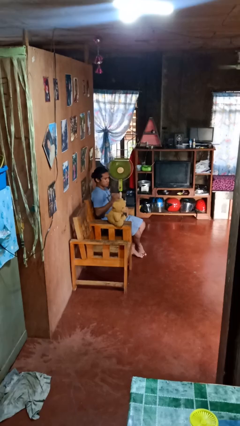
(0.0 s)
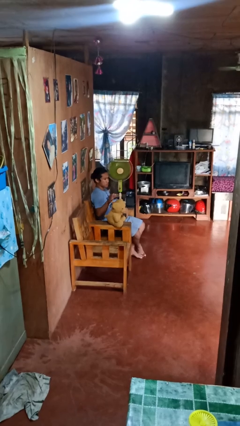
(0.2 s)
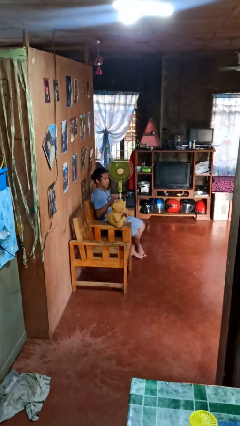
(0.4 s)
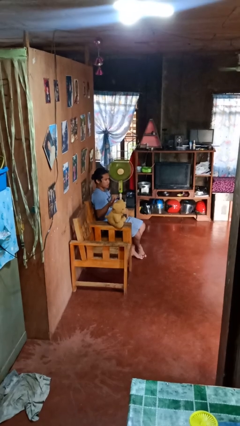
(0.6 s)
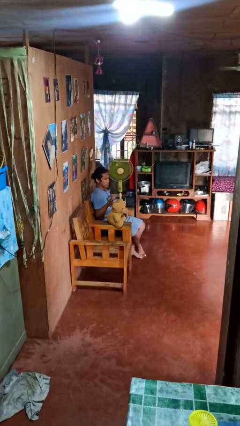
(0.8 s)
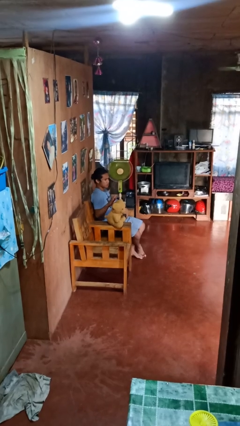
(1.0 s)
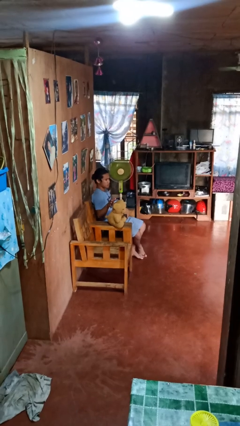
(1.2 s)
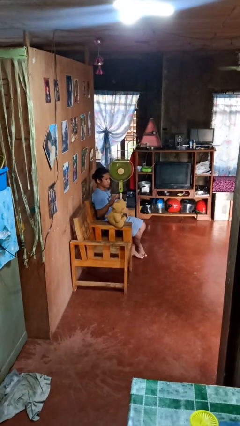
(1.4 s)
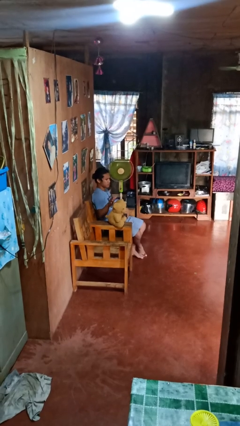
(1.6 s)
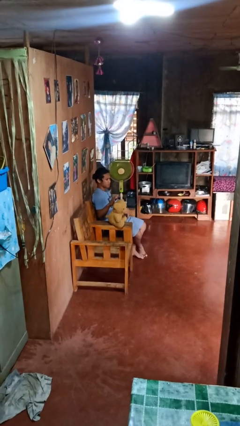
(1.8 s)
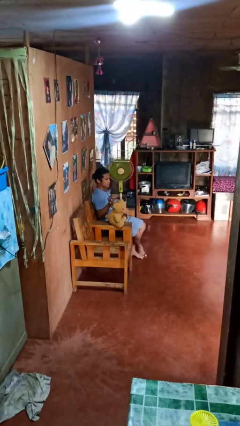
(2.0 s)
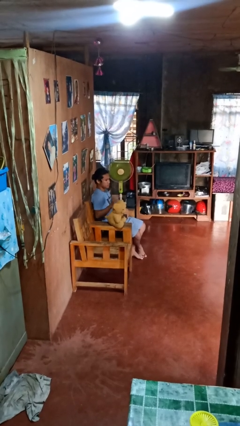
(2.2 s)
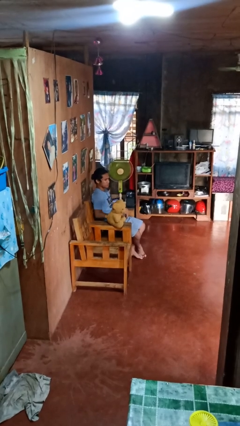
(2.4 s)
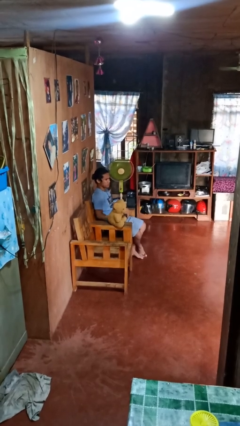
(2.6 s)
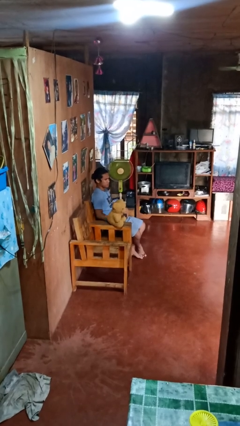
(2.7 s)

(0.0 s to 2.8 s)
person waves hand over object

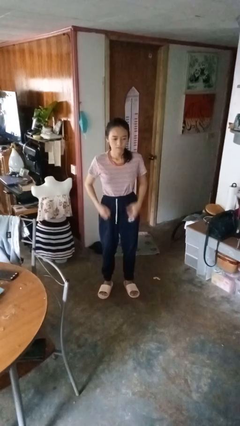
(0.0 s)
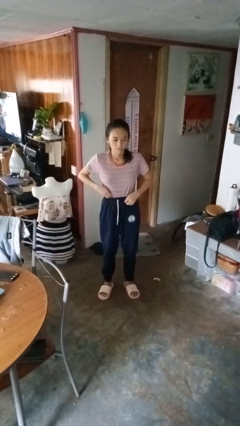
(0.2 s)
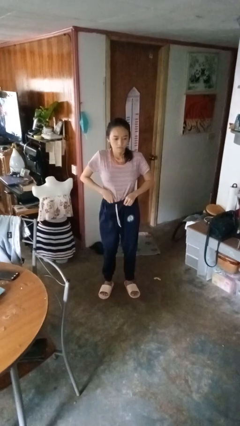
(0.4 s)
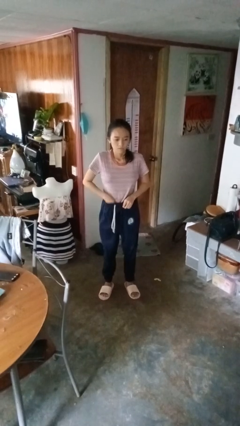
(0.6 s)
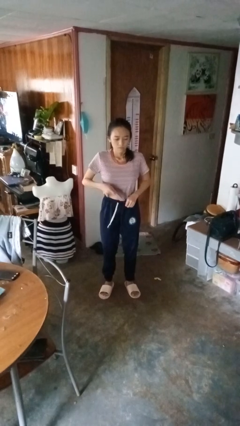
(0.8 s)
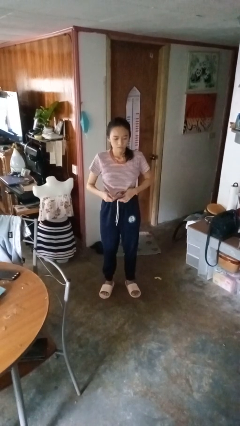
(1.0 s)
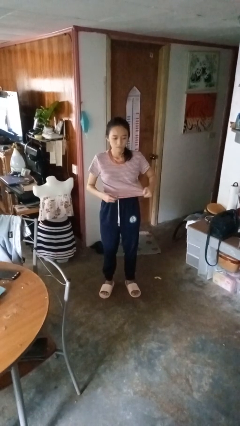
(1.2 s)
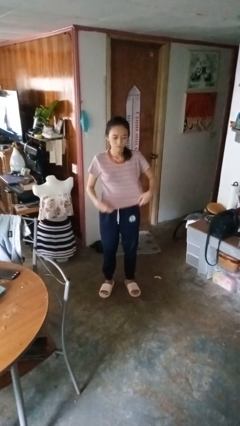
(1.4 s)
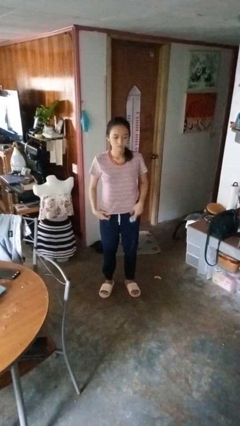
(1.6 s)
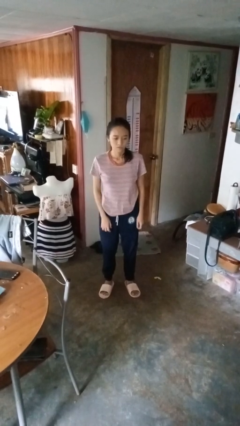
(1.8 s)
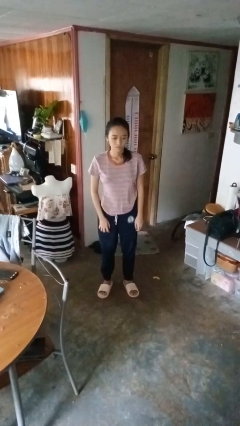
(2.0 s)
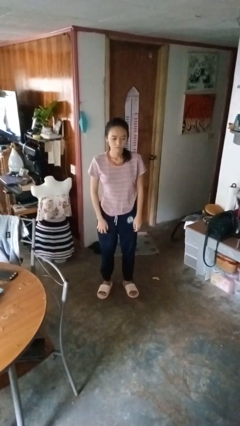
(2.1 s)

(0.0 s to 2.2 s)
person untucks shirt

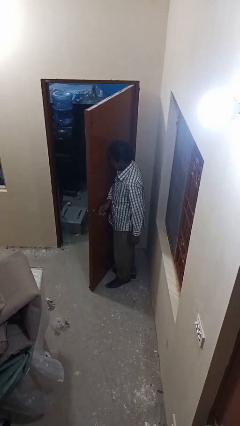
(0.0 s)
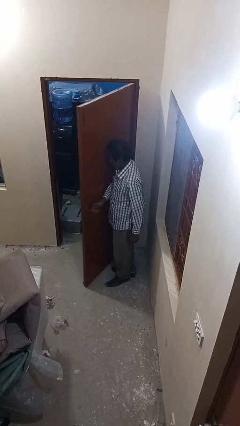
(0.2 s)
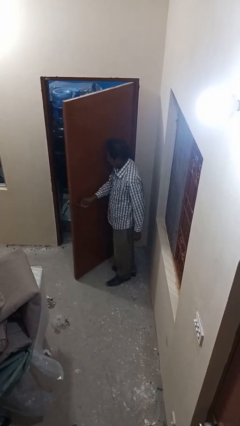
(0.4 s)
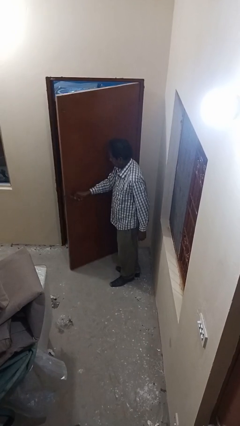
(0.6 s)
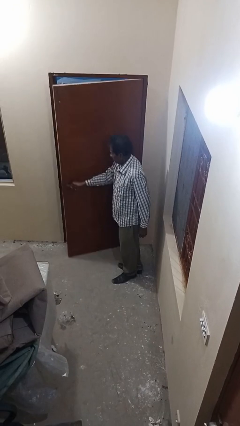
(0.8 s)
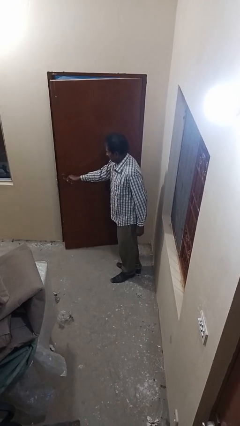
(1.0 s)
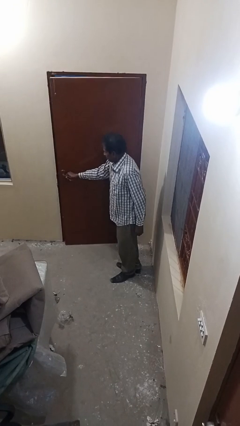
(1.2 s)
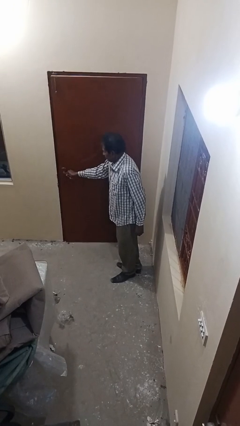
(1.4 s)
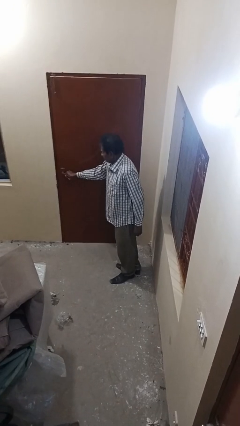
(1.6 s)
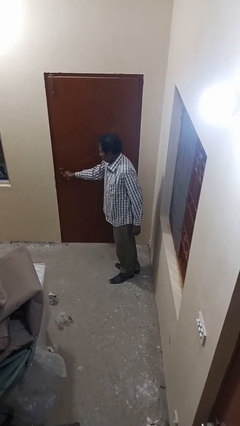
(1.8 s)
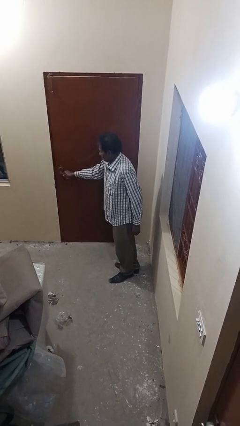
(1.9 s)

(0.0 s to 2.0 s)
person closes facility door

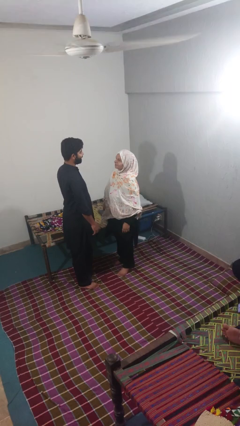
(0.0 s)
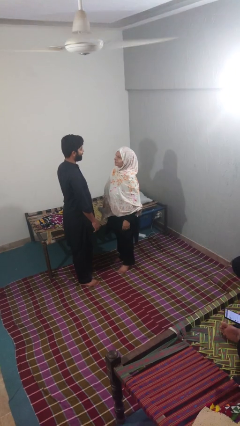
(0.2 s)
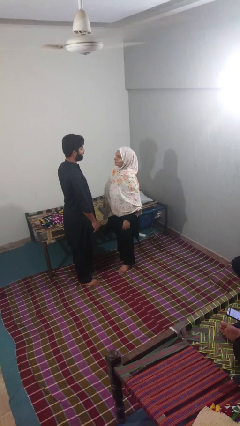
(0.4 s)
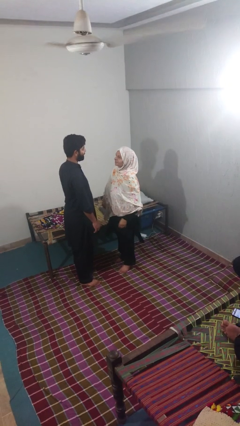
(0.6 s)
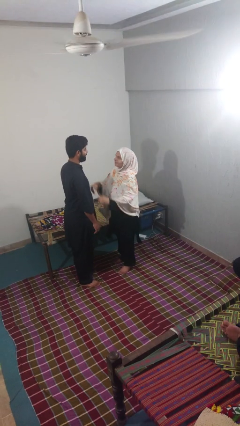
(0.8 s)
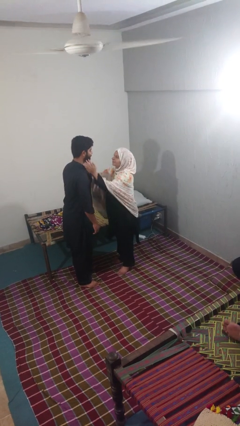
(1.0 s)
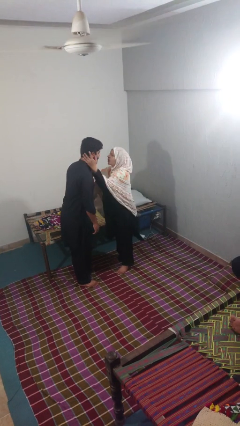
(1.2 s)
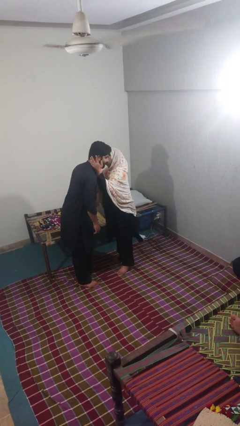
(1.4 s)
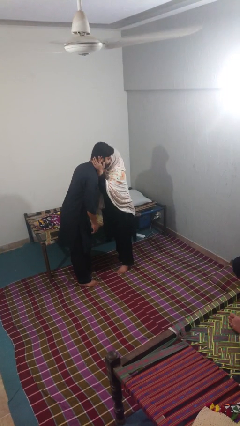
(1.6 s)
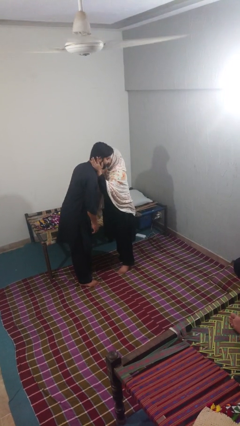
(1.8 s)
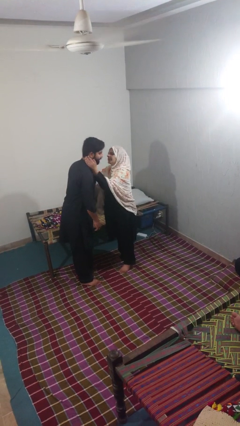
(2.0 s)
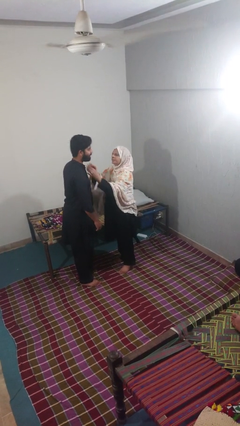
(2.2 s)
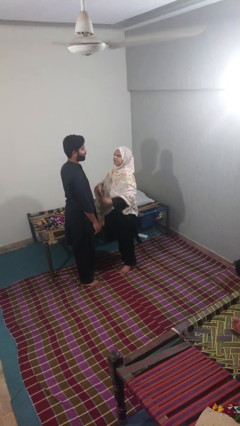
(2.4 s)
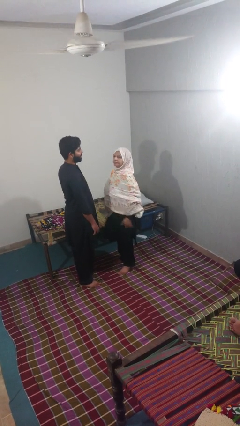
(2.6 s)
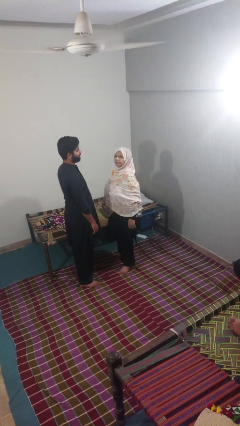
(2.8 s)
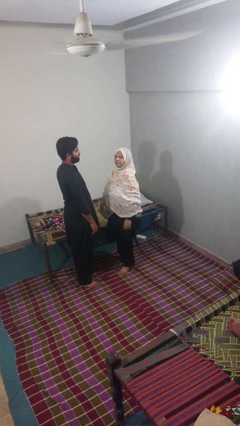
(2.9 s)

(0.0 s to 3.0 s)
person kisses cheek of person

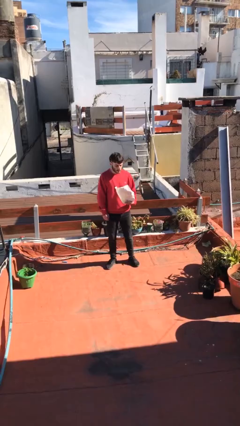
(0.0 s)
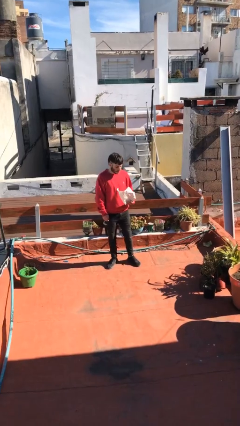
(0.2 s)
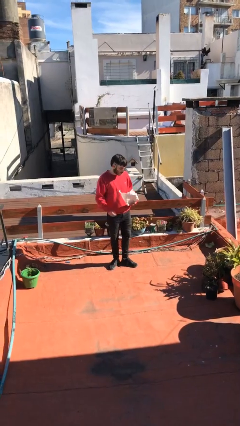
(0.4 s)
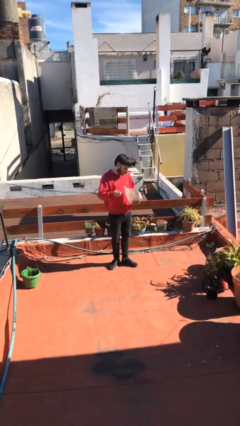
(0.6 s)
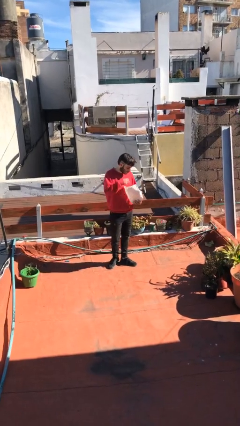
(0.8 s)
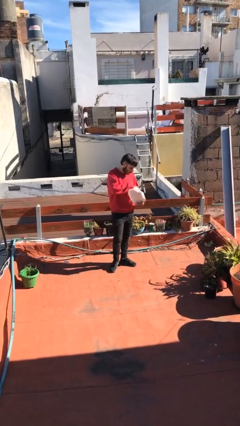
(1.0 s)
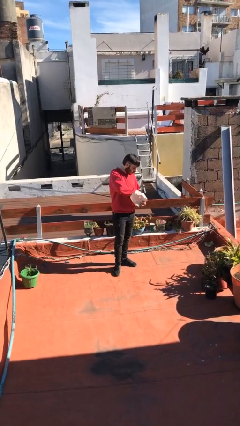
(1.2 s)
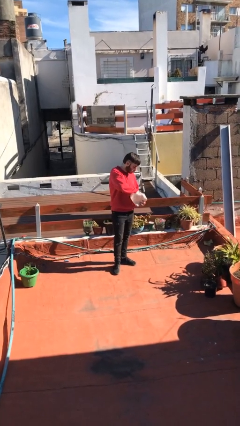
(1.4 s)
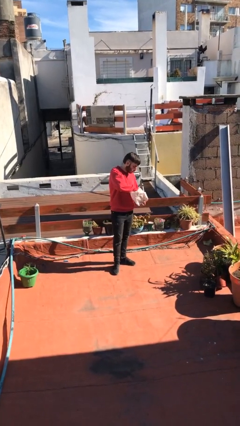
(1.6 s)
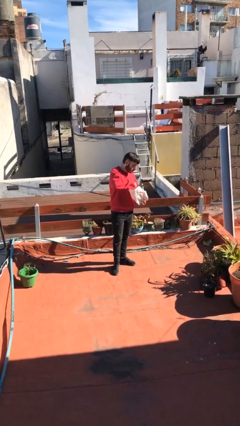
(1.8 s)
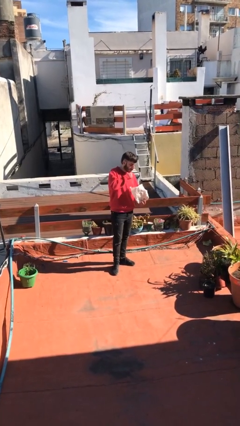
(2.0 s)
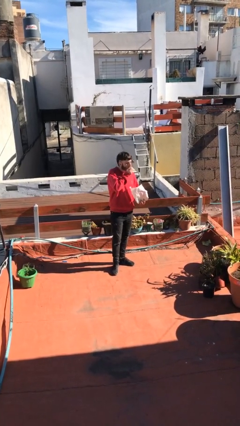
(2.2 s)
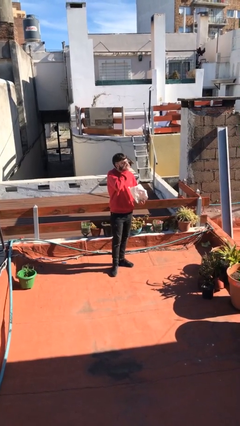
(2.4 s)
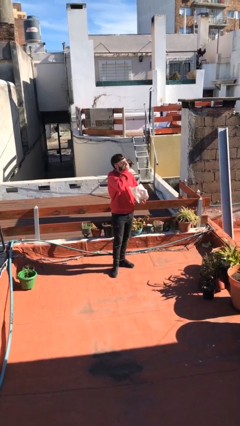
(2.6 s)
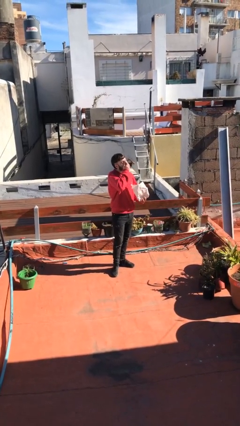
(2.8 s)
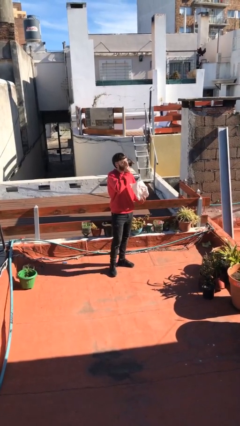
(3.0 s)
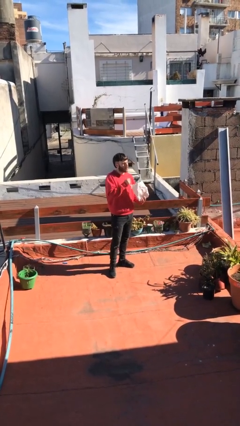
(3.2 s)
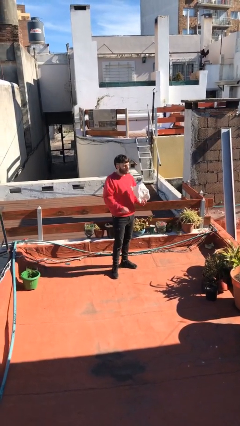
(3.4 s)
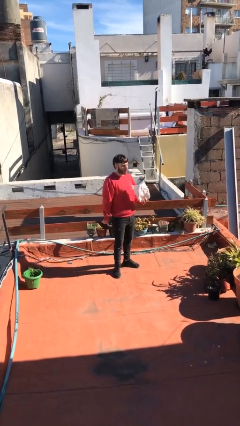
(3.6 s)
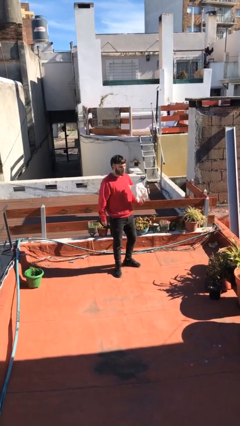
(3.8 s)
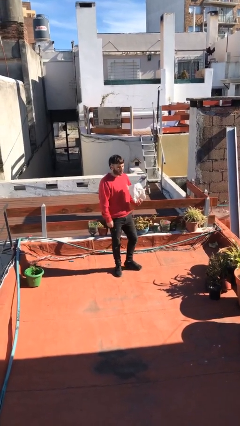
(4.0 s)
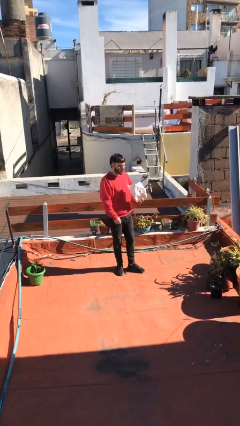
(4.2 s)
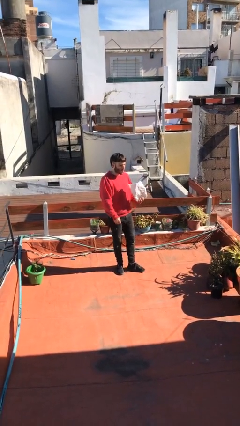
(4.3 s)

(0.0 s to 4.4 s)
person eats snack from bag

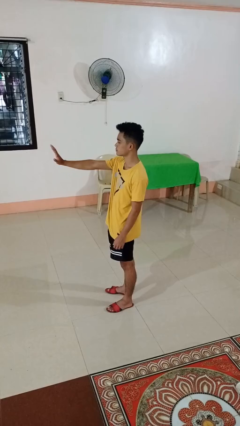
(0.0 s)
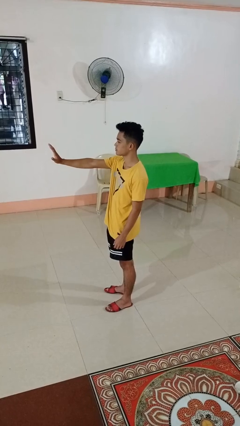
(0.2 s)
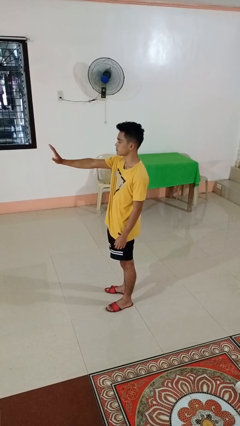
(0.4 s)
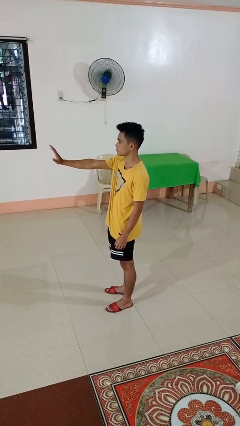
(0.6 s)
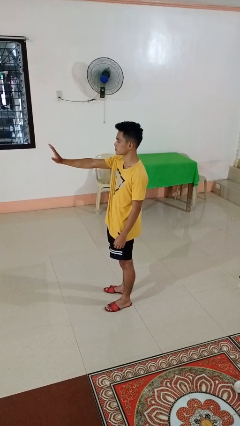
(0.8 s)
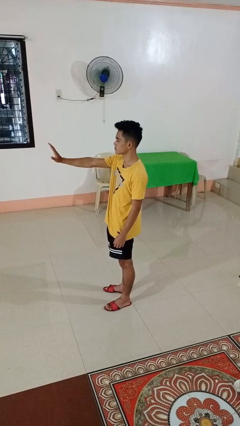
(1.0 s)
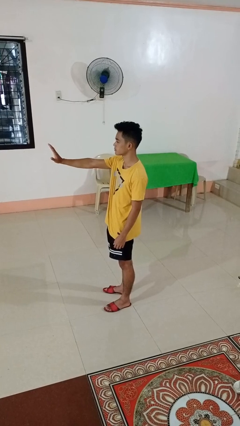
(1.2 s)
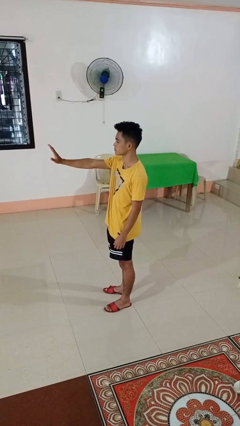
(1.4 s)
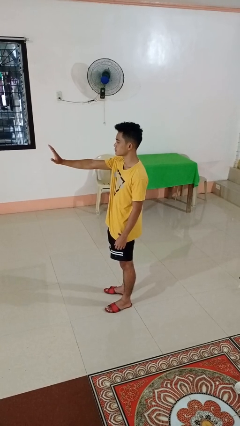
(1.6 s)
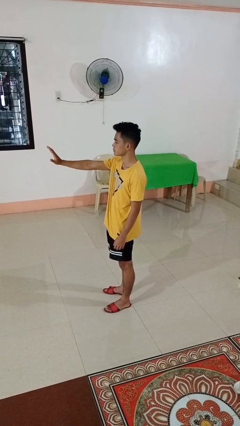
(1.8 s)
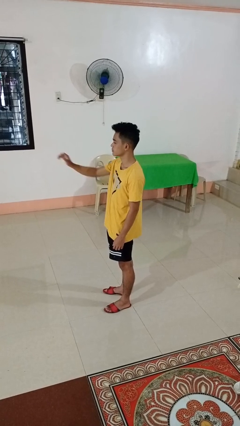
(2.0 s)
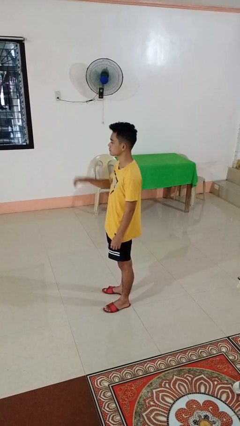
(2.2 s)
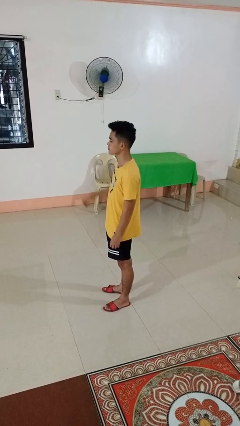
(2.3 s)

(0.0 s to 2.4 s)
person gestures stop

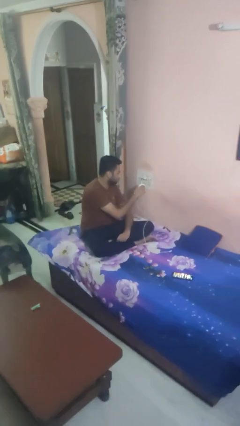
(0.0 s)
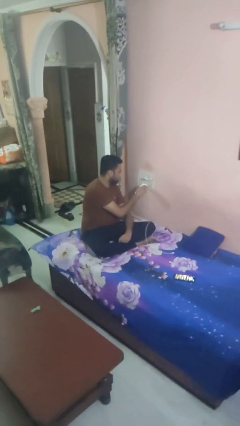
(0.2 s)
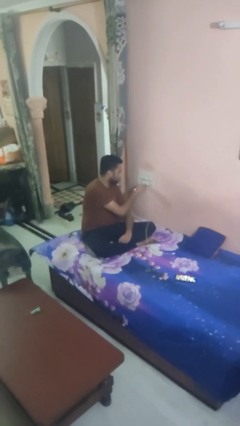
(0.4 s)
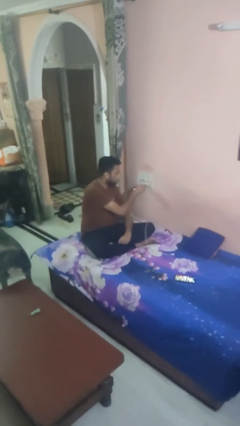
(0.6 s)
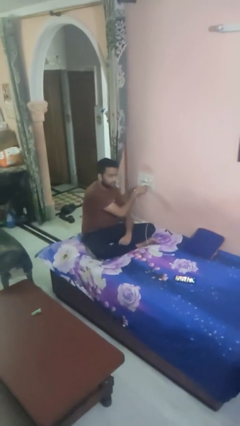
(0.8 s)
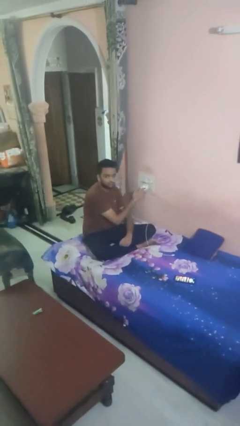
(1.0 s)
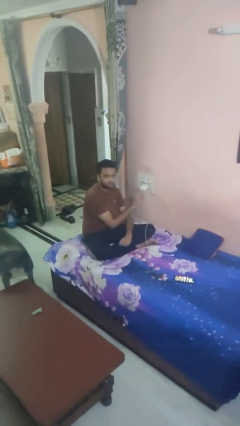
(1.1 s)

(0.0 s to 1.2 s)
person plugs into electrical socket
